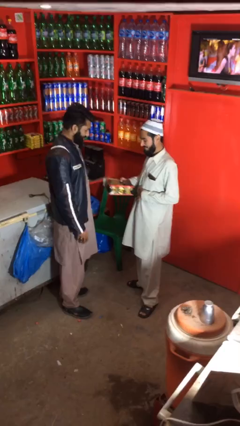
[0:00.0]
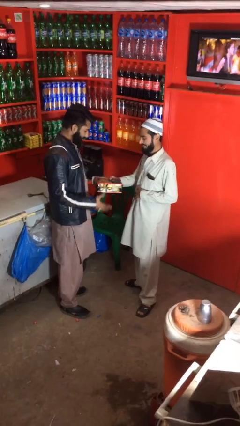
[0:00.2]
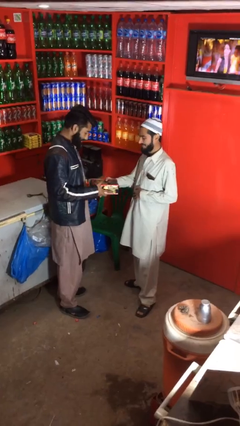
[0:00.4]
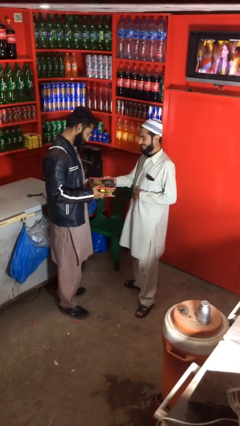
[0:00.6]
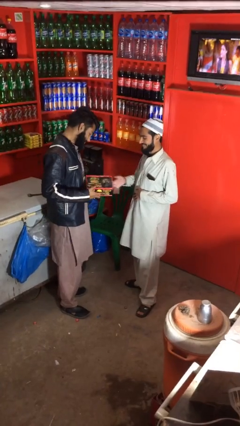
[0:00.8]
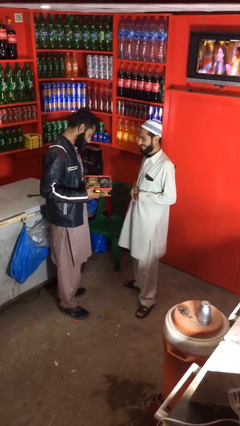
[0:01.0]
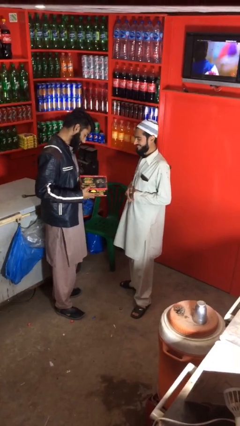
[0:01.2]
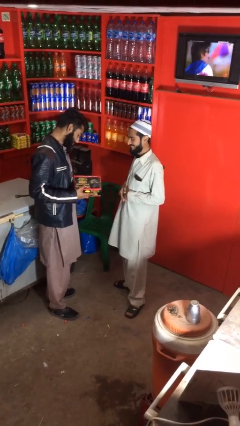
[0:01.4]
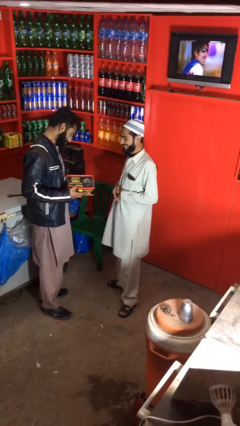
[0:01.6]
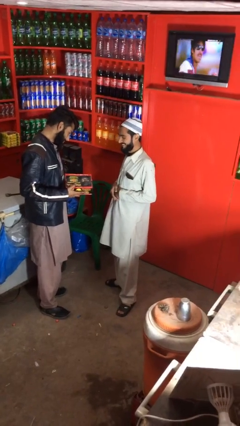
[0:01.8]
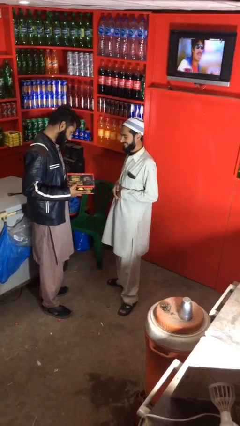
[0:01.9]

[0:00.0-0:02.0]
person transfers object to person

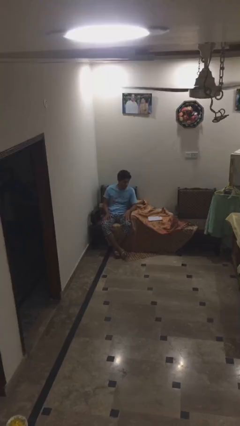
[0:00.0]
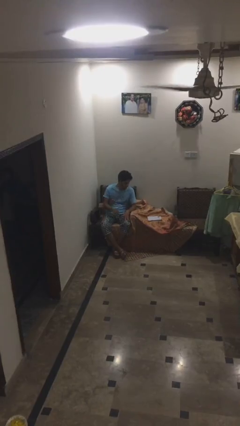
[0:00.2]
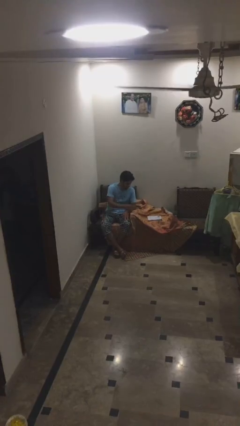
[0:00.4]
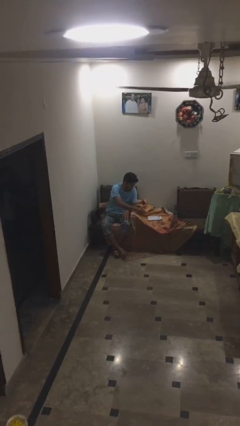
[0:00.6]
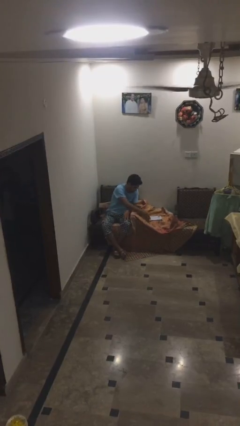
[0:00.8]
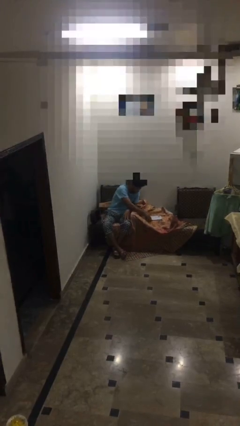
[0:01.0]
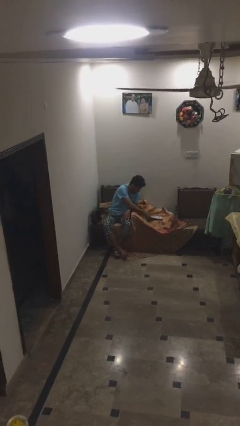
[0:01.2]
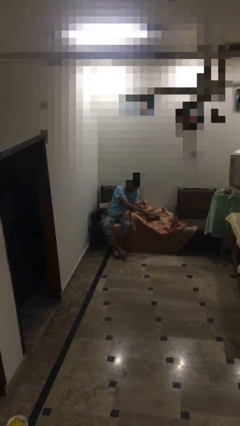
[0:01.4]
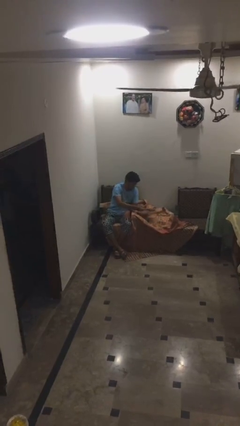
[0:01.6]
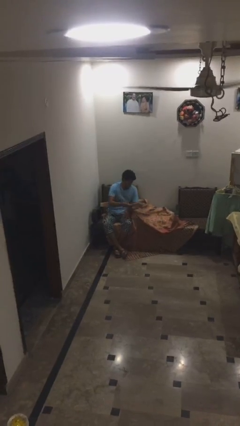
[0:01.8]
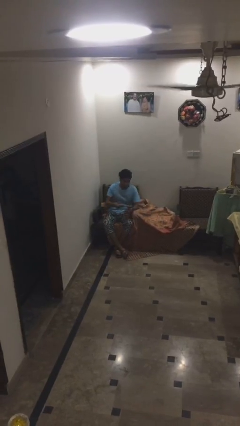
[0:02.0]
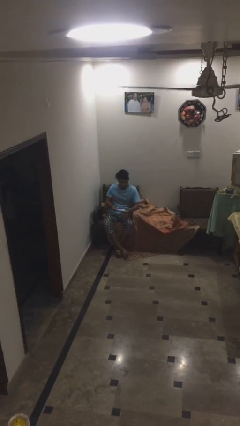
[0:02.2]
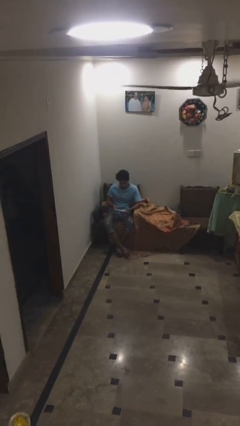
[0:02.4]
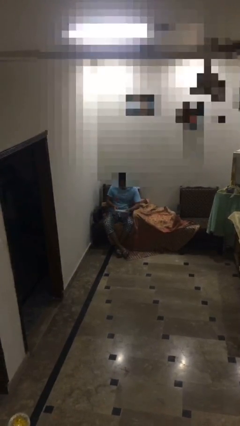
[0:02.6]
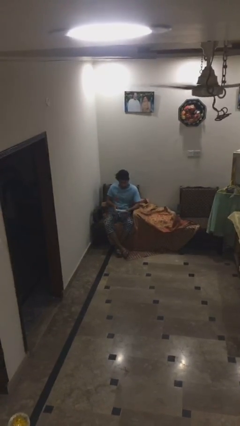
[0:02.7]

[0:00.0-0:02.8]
person picks up object from table

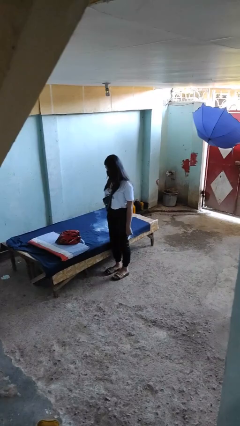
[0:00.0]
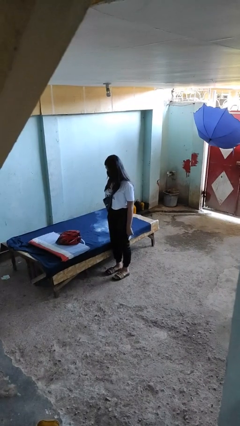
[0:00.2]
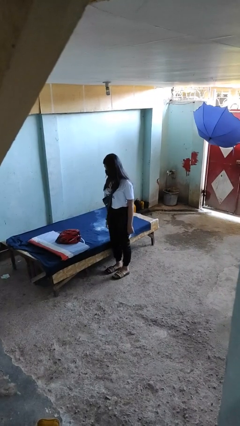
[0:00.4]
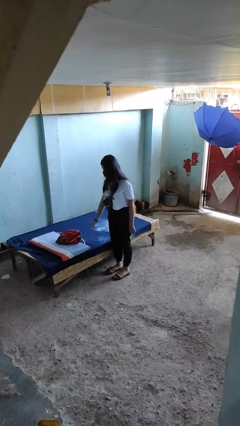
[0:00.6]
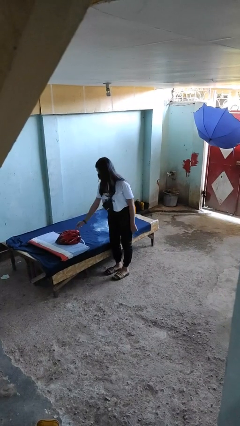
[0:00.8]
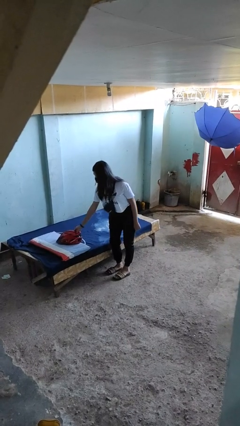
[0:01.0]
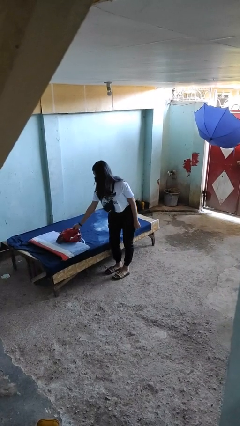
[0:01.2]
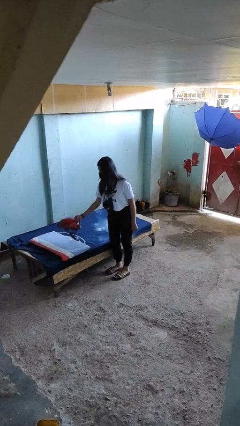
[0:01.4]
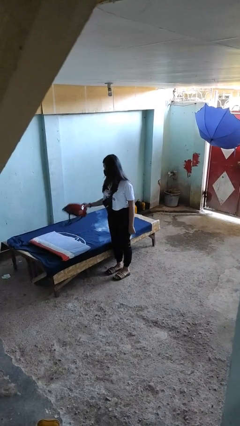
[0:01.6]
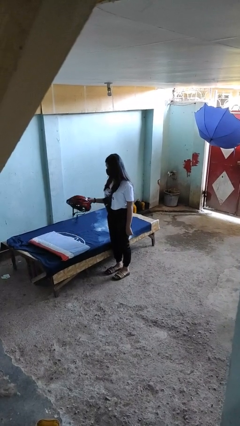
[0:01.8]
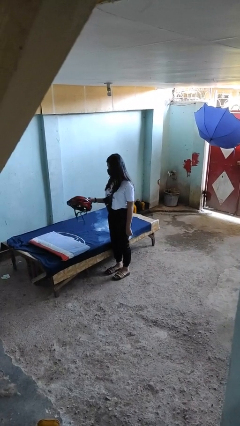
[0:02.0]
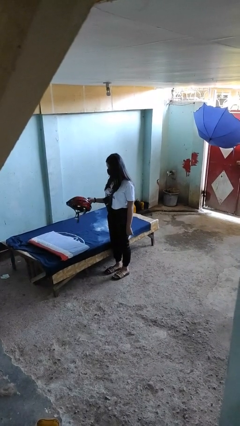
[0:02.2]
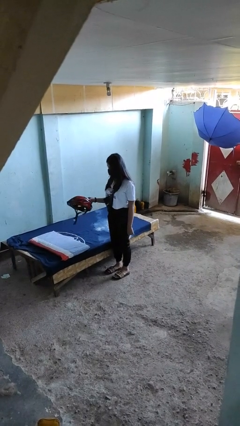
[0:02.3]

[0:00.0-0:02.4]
person picks up object from bed

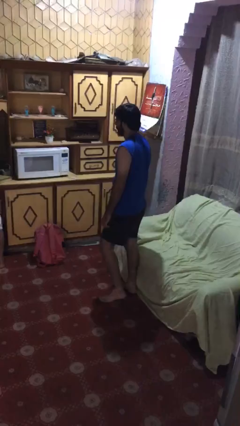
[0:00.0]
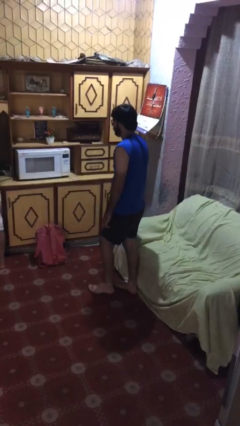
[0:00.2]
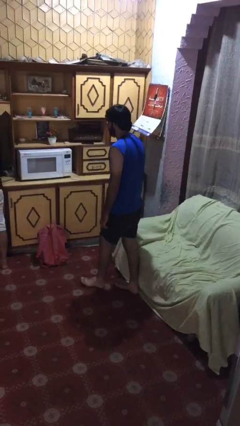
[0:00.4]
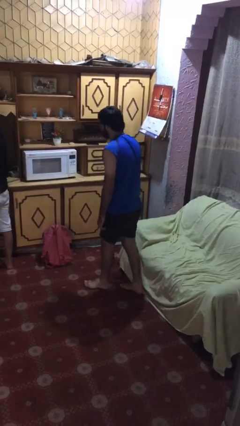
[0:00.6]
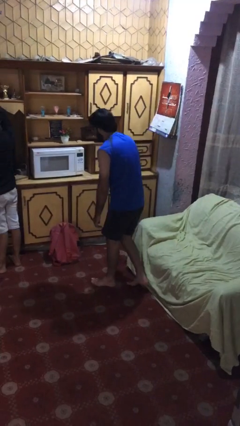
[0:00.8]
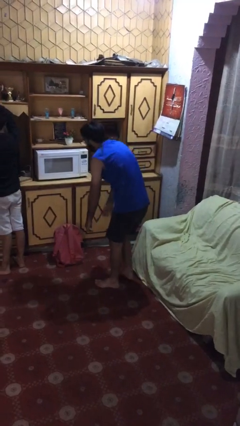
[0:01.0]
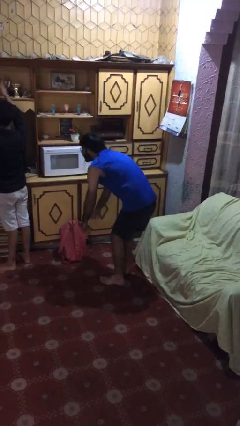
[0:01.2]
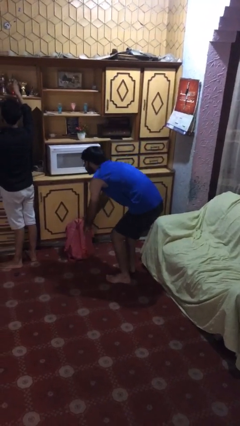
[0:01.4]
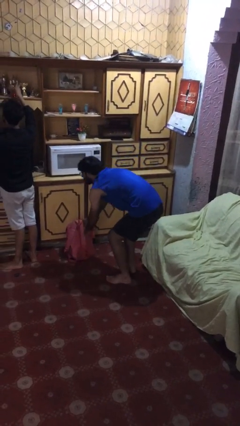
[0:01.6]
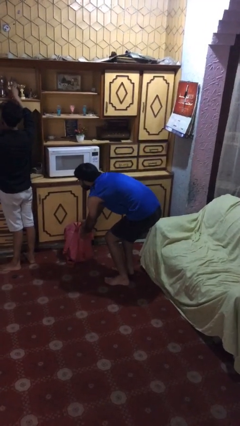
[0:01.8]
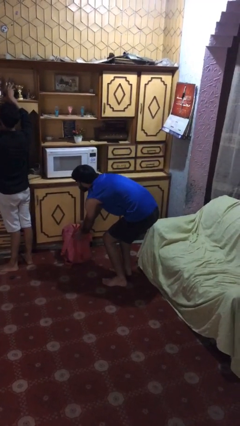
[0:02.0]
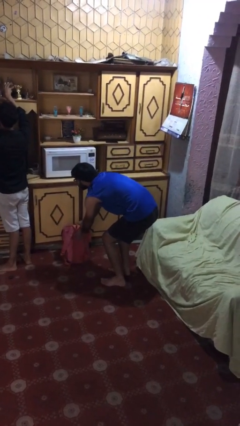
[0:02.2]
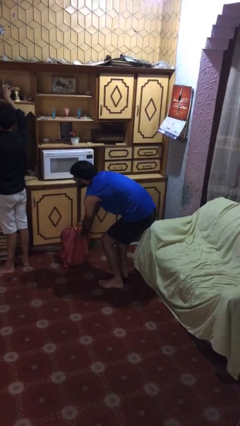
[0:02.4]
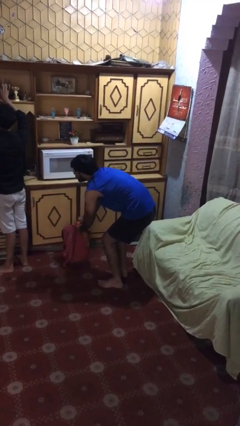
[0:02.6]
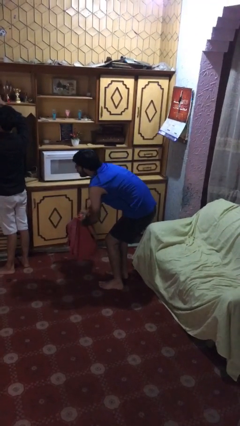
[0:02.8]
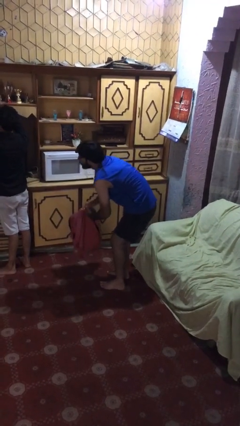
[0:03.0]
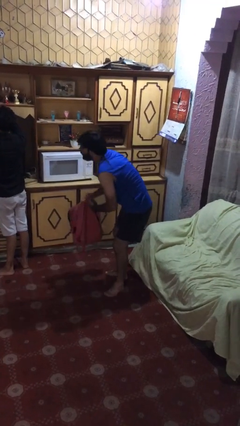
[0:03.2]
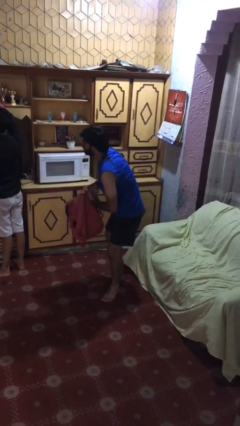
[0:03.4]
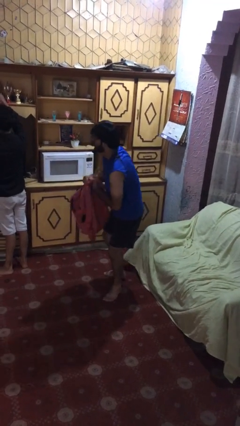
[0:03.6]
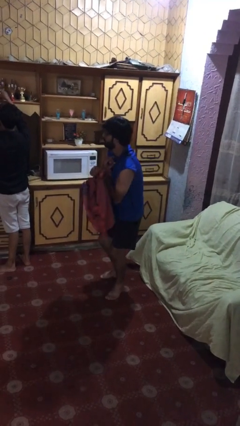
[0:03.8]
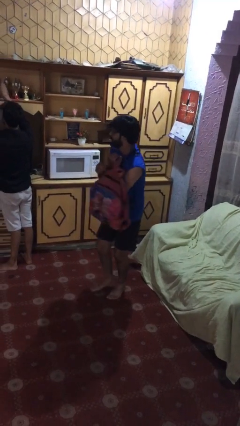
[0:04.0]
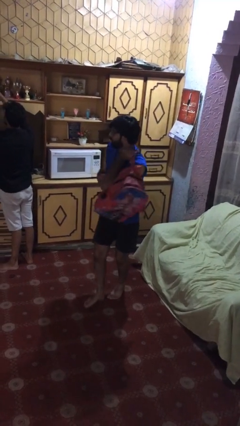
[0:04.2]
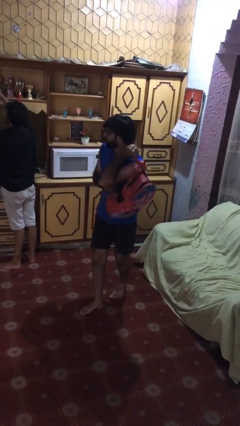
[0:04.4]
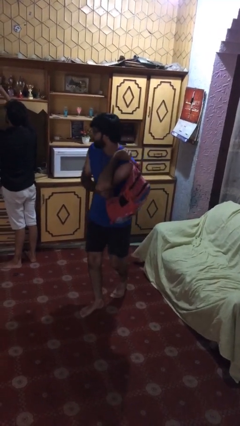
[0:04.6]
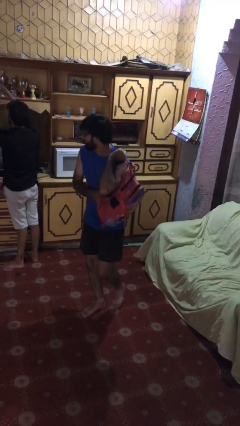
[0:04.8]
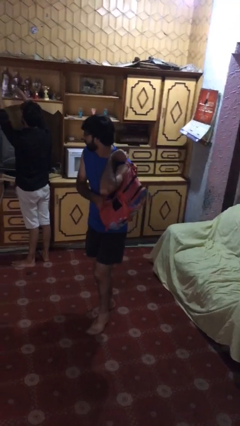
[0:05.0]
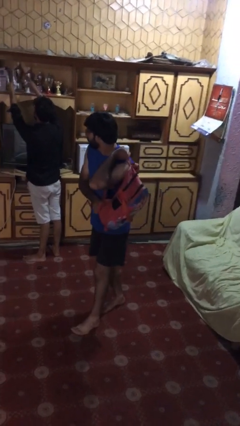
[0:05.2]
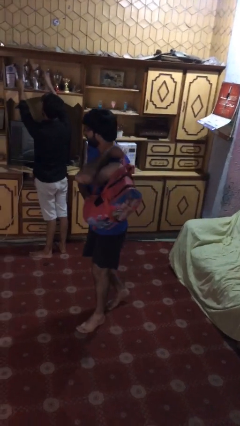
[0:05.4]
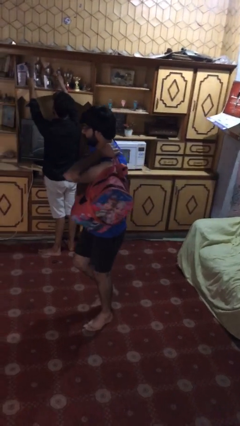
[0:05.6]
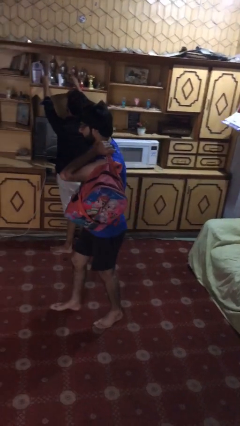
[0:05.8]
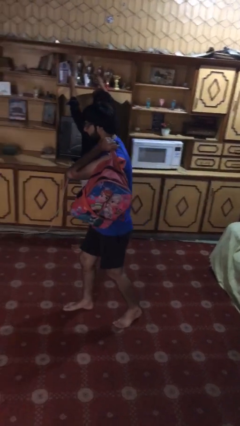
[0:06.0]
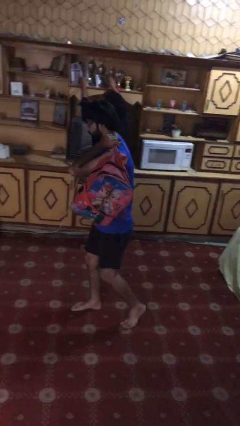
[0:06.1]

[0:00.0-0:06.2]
person steals object from person

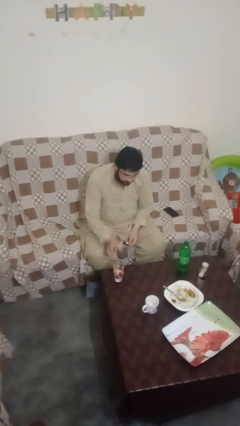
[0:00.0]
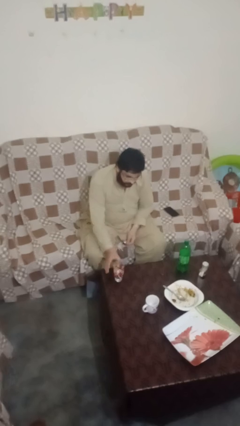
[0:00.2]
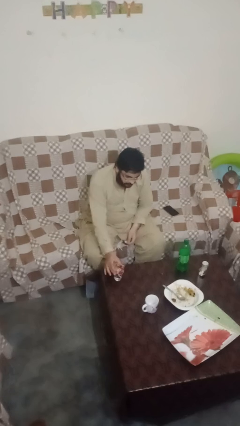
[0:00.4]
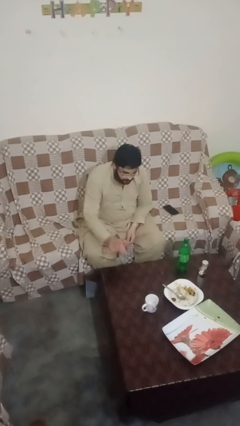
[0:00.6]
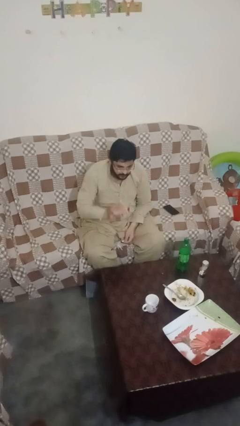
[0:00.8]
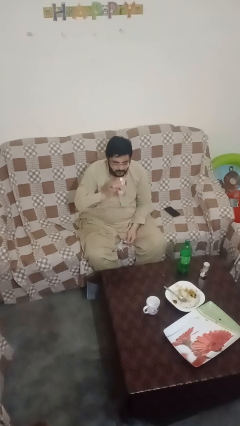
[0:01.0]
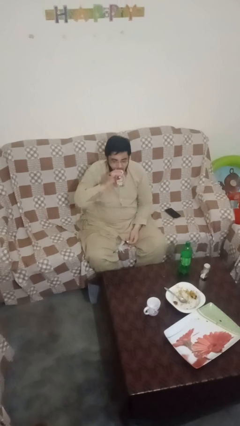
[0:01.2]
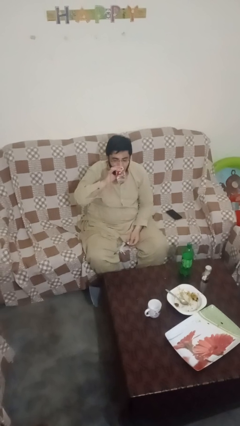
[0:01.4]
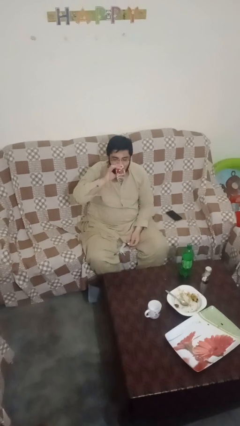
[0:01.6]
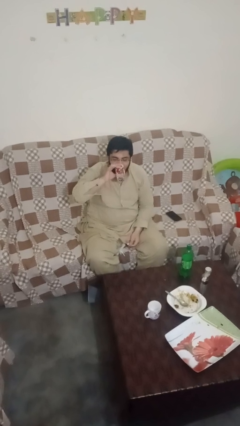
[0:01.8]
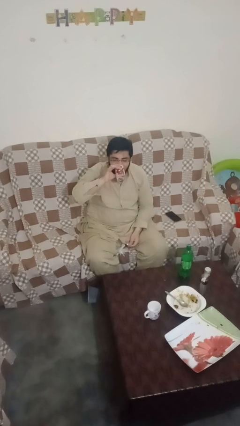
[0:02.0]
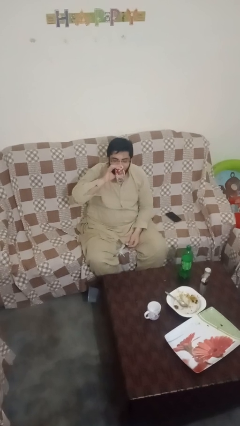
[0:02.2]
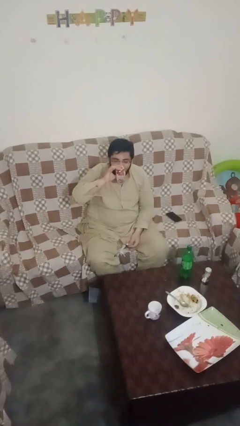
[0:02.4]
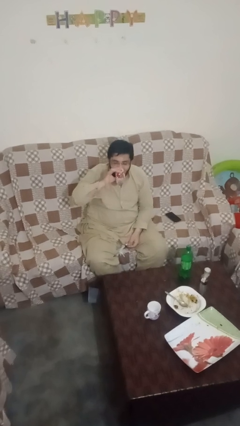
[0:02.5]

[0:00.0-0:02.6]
person drinks from cup

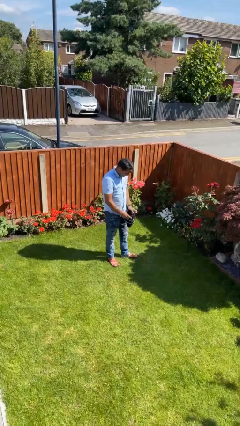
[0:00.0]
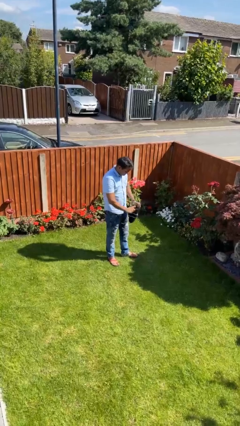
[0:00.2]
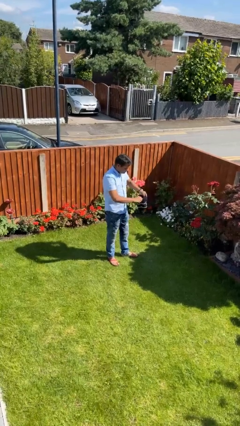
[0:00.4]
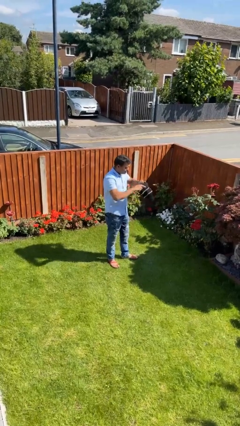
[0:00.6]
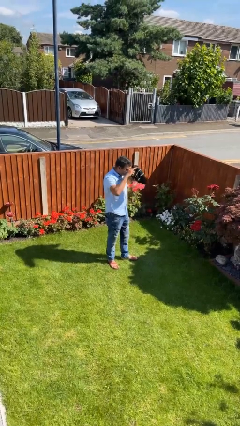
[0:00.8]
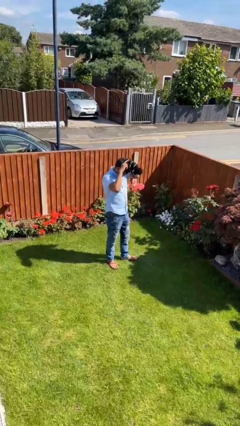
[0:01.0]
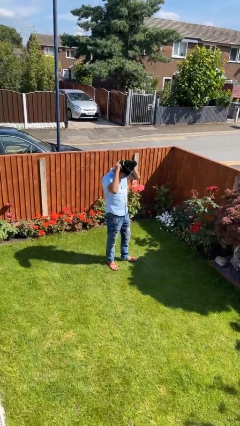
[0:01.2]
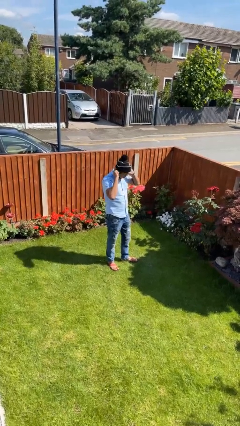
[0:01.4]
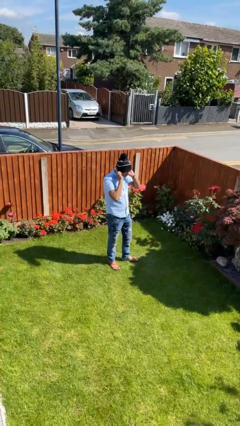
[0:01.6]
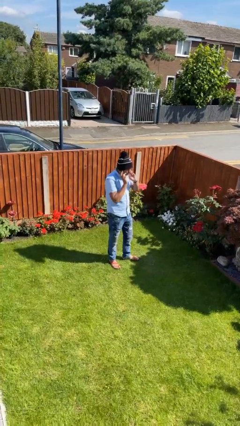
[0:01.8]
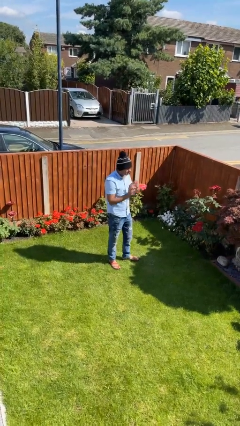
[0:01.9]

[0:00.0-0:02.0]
person puts on hat
